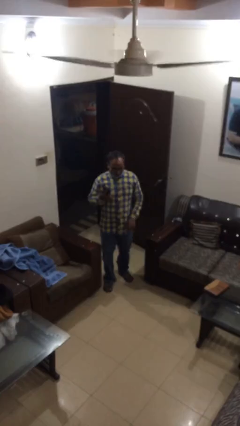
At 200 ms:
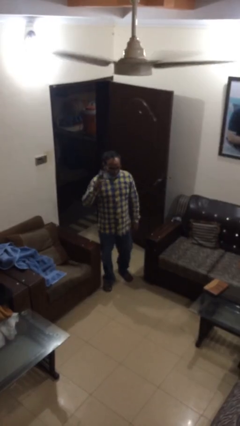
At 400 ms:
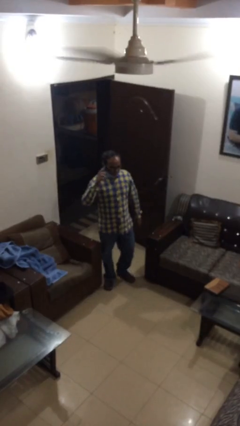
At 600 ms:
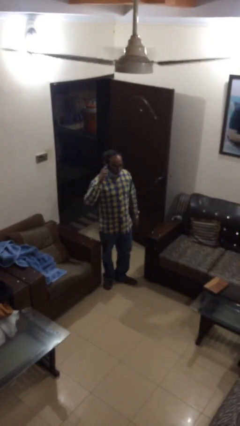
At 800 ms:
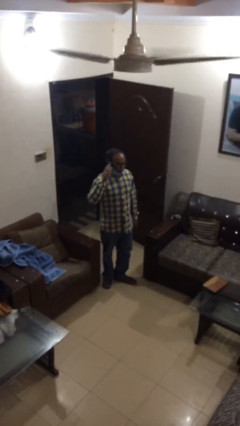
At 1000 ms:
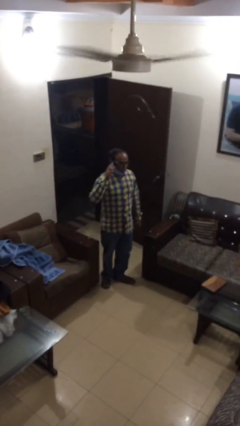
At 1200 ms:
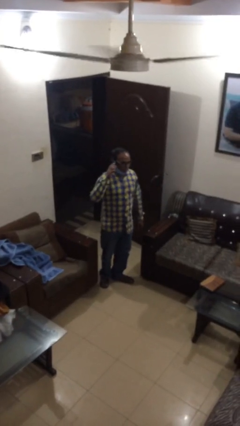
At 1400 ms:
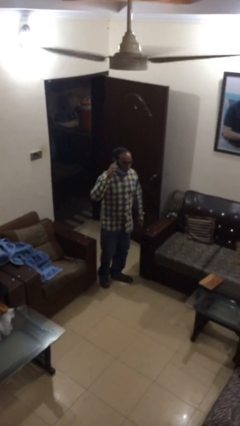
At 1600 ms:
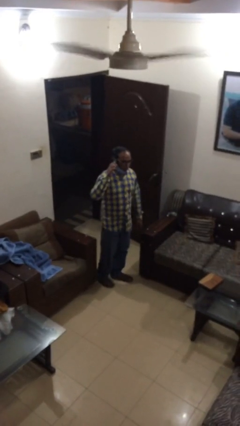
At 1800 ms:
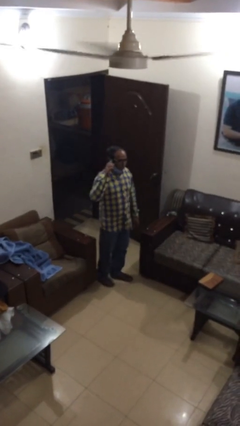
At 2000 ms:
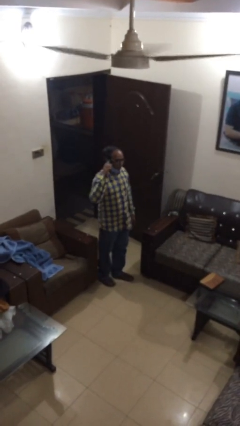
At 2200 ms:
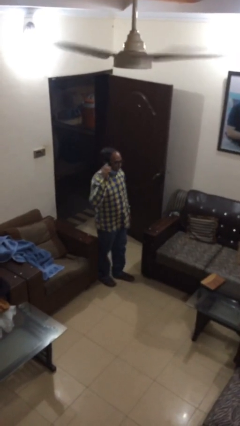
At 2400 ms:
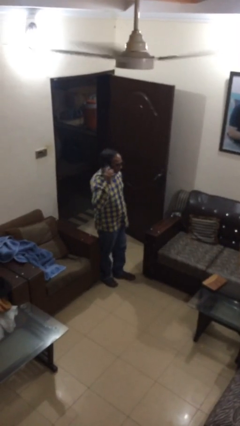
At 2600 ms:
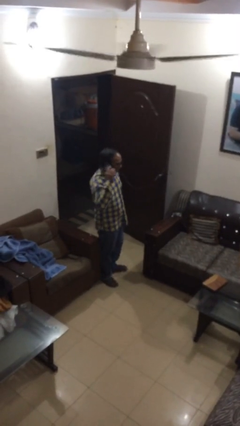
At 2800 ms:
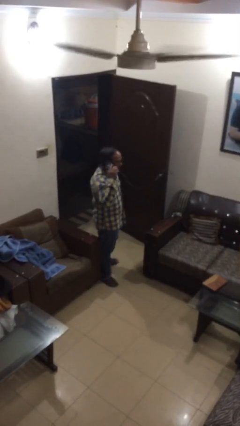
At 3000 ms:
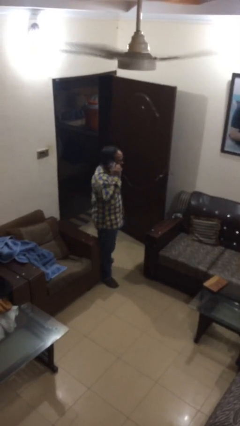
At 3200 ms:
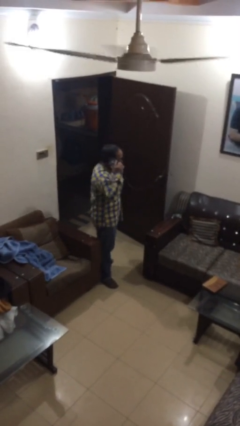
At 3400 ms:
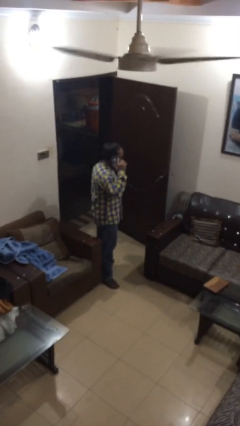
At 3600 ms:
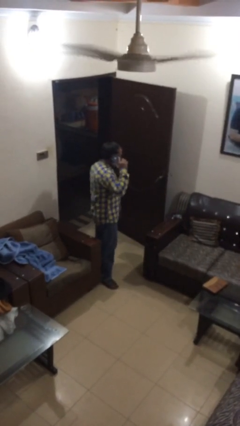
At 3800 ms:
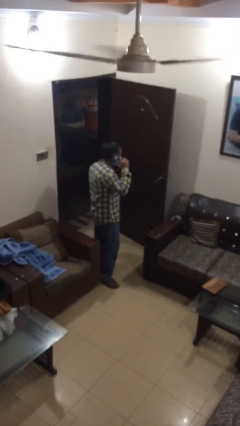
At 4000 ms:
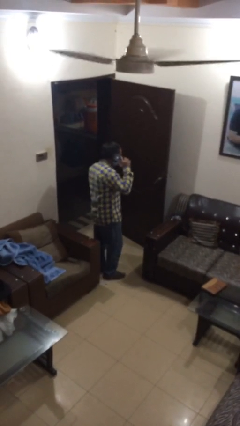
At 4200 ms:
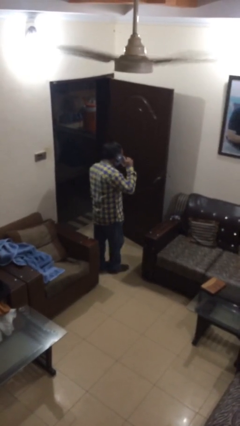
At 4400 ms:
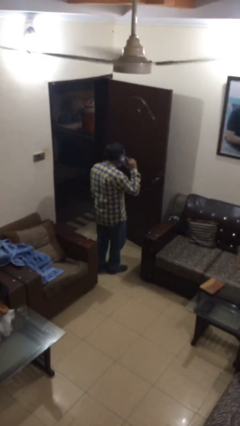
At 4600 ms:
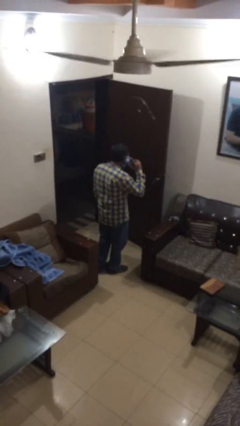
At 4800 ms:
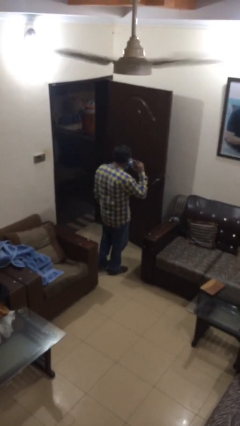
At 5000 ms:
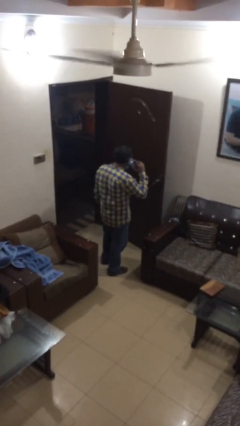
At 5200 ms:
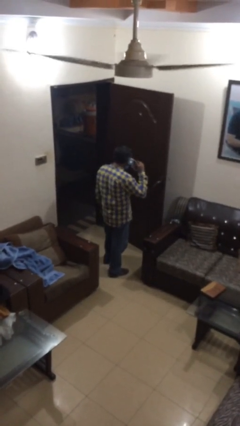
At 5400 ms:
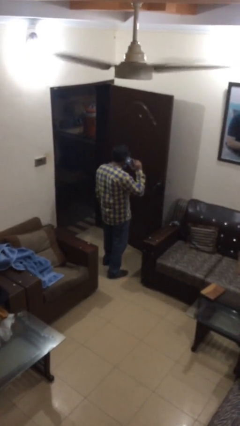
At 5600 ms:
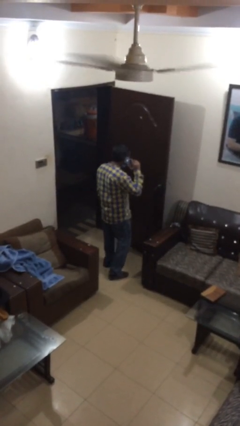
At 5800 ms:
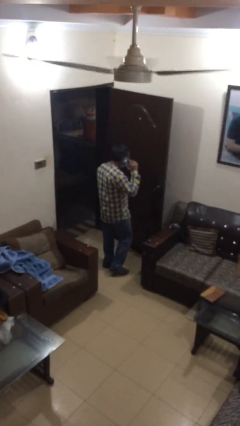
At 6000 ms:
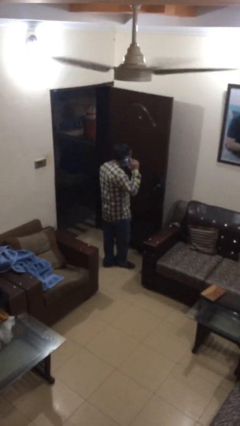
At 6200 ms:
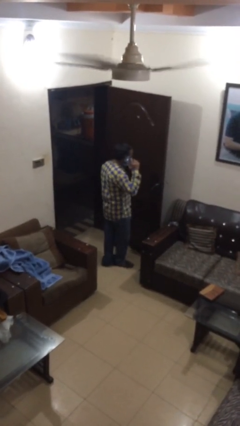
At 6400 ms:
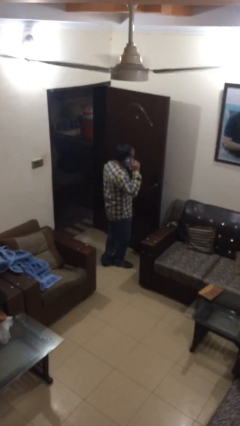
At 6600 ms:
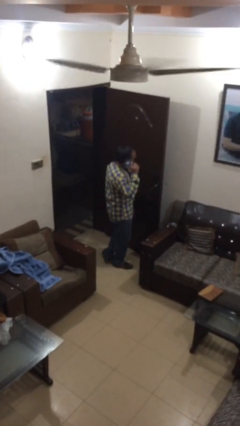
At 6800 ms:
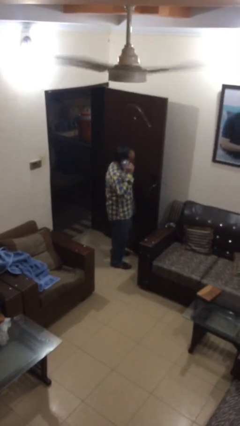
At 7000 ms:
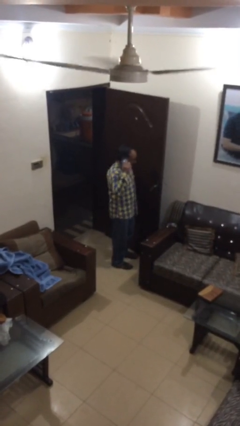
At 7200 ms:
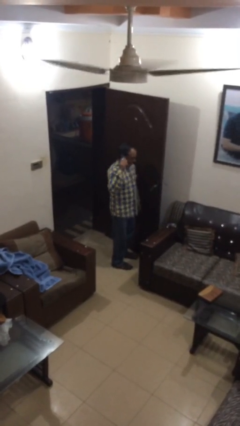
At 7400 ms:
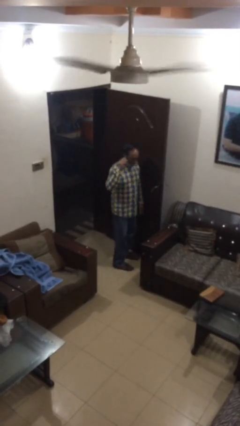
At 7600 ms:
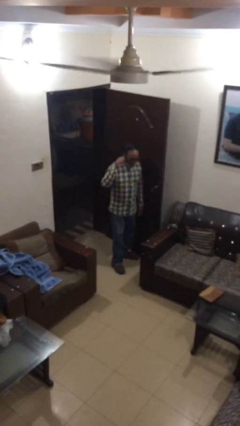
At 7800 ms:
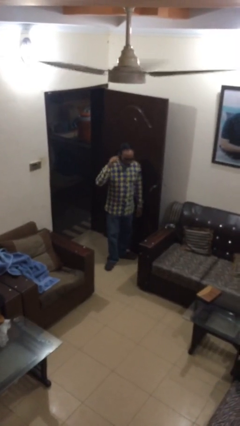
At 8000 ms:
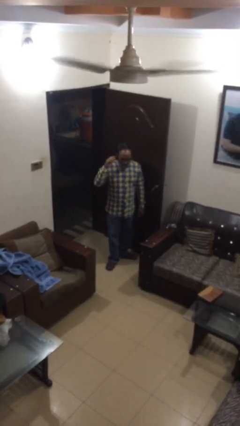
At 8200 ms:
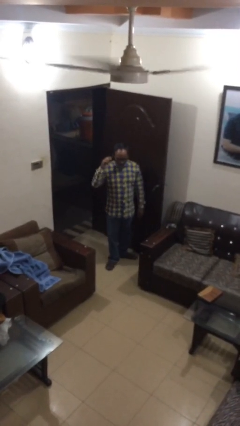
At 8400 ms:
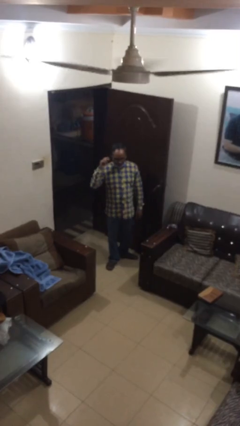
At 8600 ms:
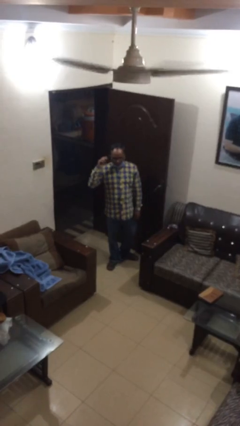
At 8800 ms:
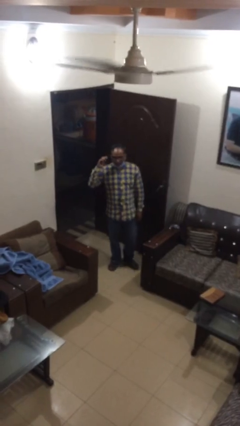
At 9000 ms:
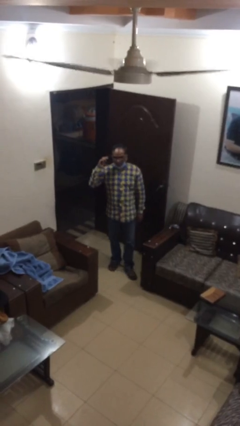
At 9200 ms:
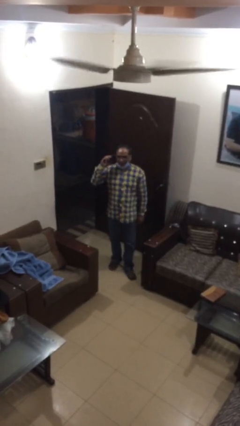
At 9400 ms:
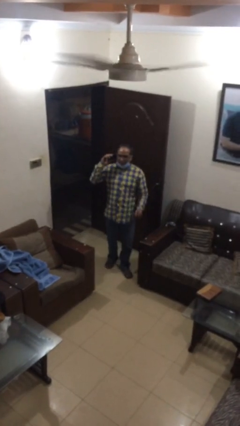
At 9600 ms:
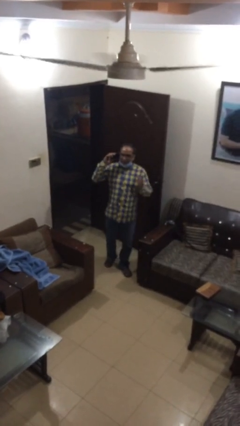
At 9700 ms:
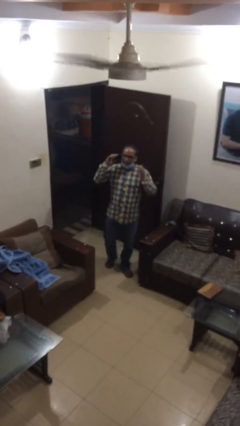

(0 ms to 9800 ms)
person talks on phone

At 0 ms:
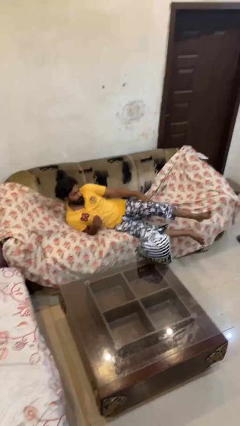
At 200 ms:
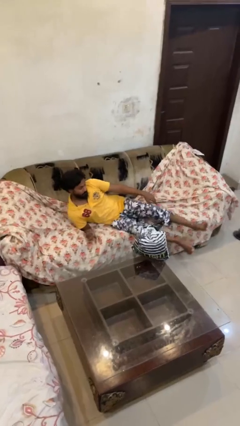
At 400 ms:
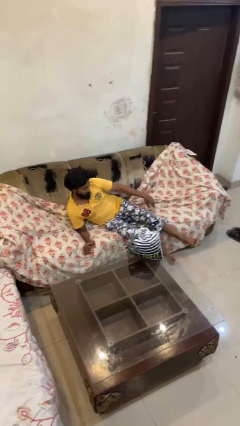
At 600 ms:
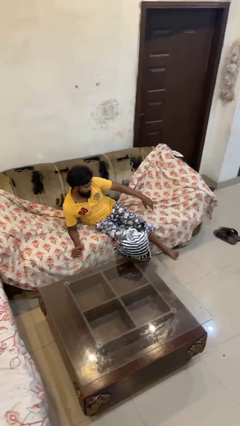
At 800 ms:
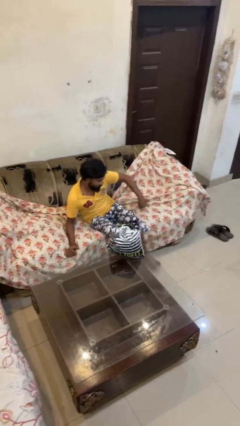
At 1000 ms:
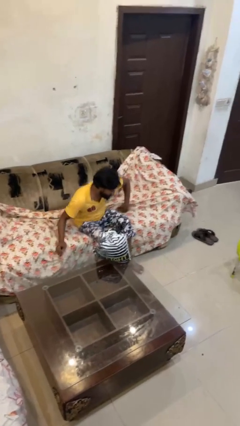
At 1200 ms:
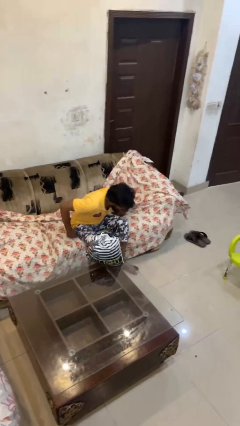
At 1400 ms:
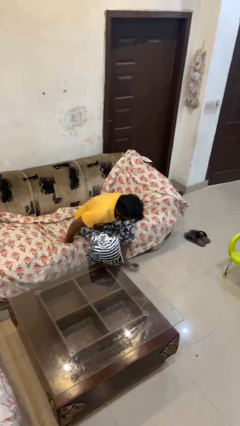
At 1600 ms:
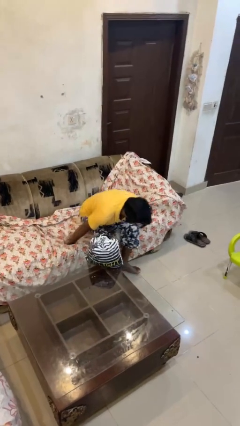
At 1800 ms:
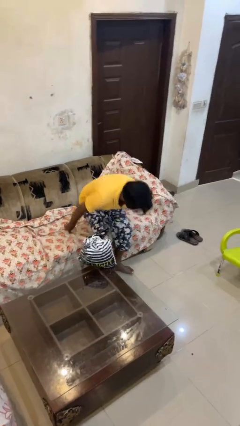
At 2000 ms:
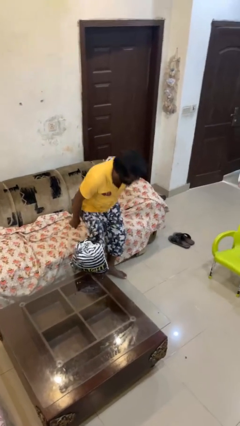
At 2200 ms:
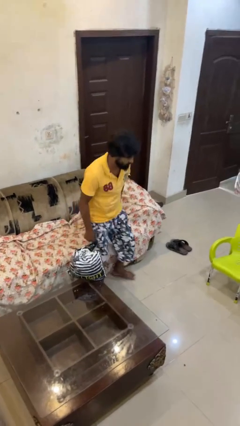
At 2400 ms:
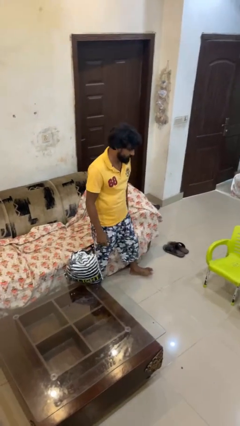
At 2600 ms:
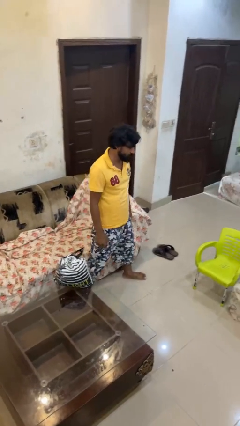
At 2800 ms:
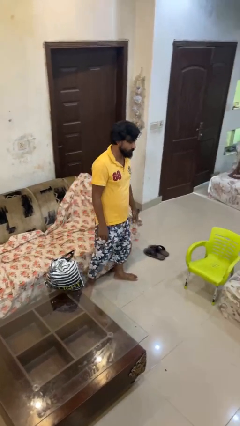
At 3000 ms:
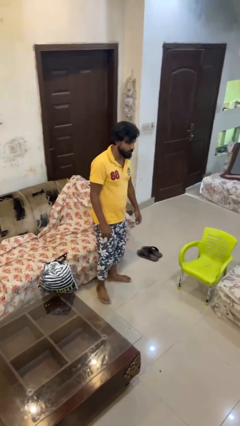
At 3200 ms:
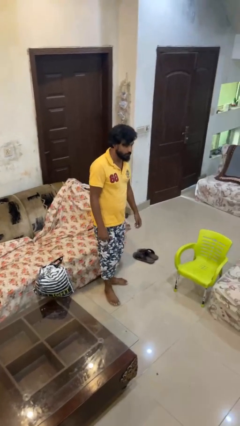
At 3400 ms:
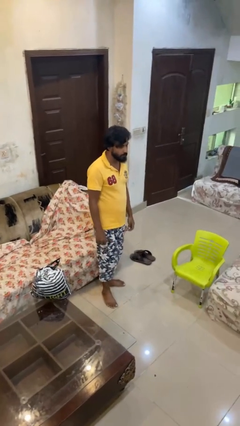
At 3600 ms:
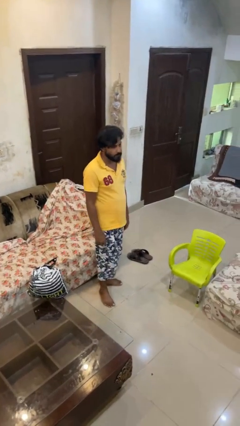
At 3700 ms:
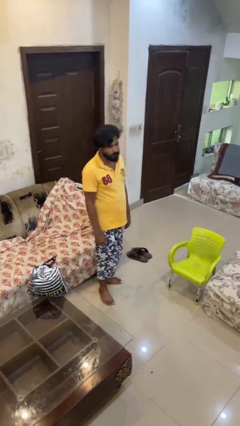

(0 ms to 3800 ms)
person stands up

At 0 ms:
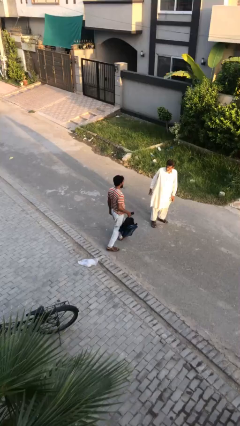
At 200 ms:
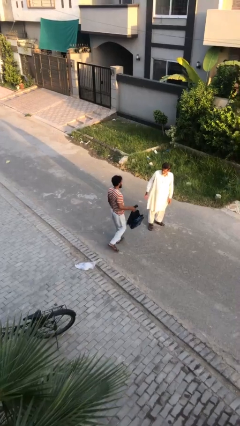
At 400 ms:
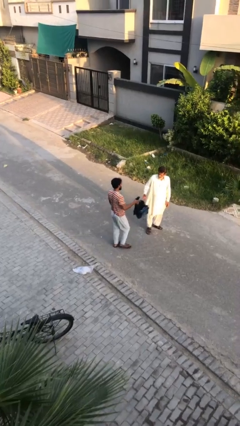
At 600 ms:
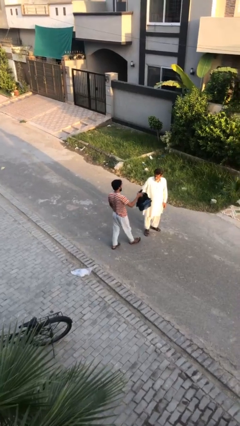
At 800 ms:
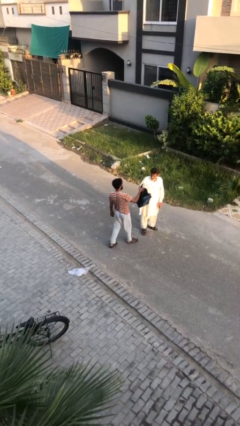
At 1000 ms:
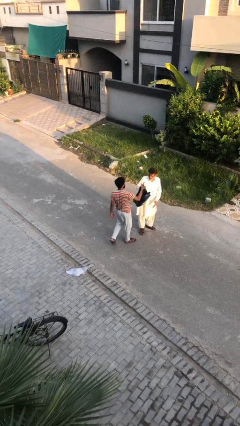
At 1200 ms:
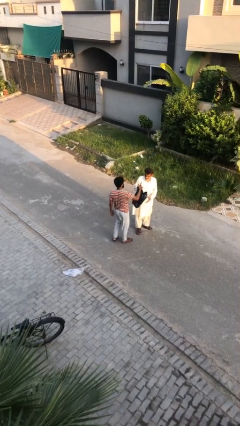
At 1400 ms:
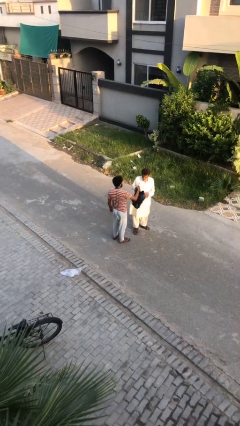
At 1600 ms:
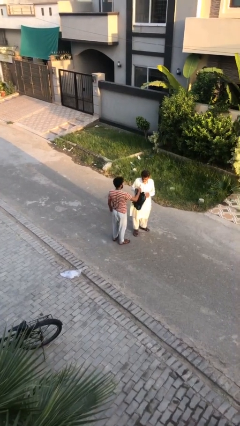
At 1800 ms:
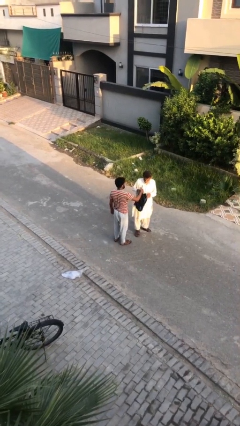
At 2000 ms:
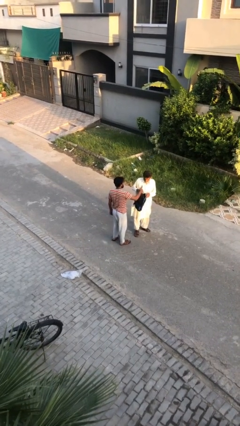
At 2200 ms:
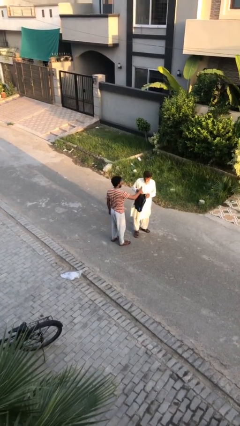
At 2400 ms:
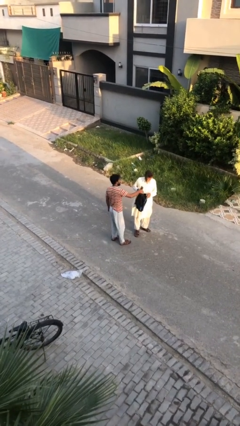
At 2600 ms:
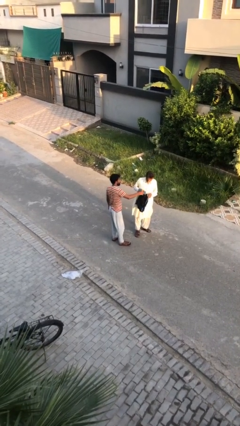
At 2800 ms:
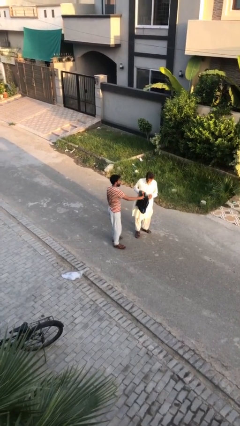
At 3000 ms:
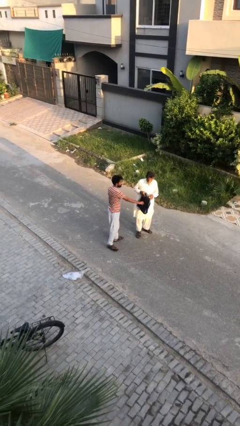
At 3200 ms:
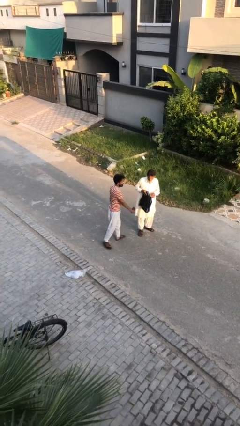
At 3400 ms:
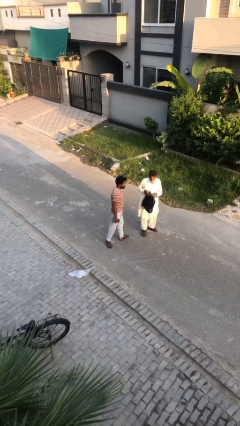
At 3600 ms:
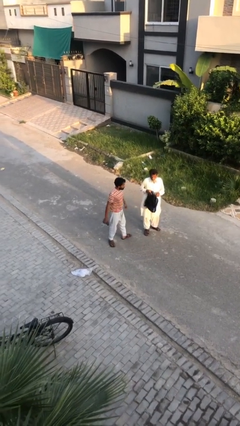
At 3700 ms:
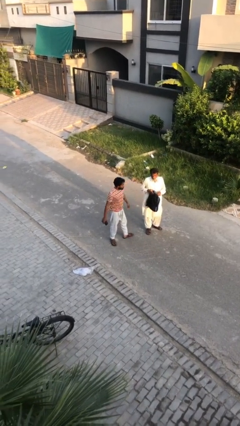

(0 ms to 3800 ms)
person transfers object to person

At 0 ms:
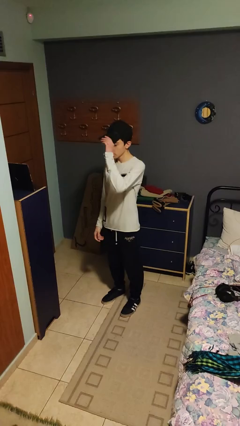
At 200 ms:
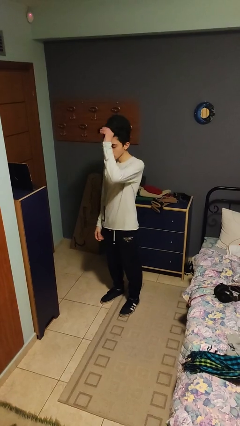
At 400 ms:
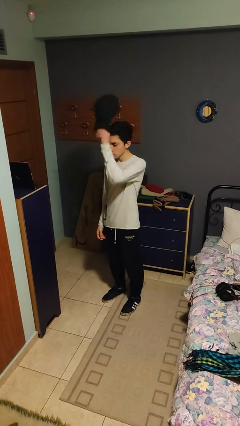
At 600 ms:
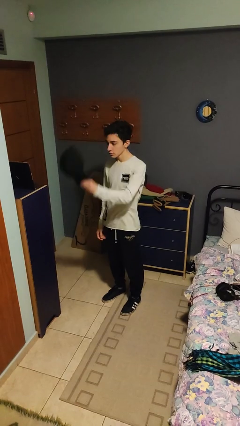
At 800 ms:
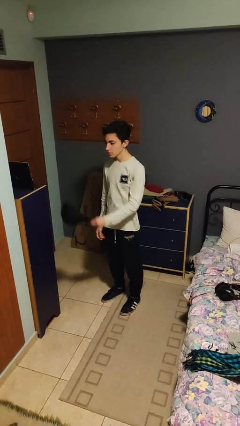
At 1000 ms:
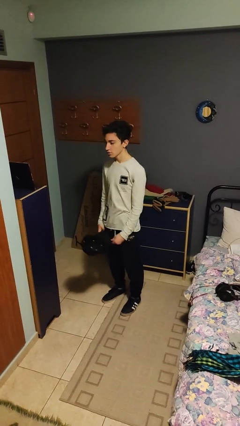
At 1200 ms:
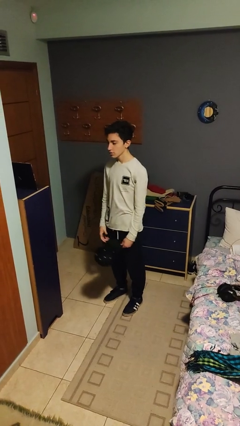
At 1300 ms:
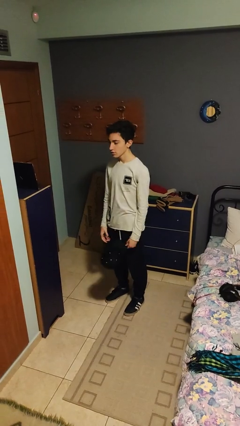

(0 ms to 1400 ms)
person takes off hat
